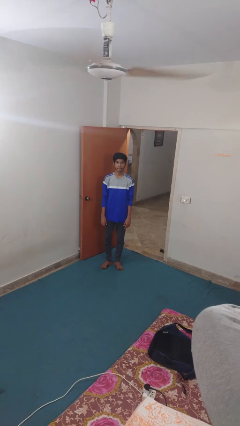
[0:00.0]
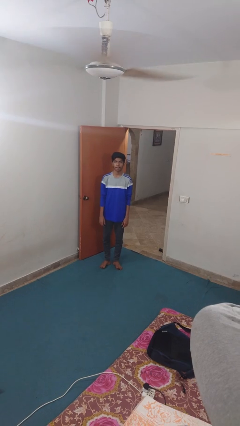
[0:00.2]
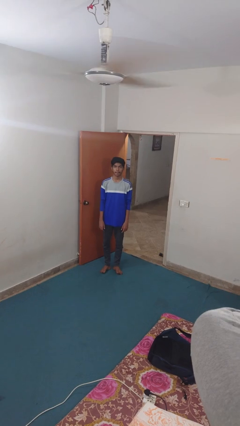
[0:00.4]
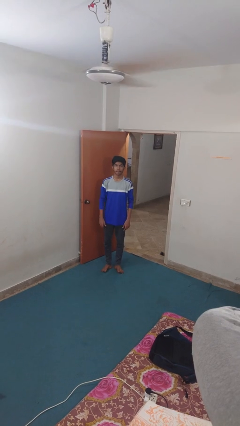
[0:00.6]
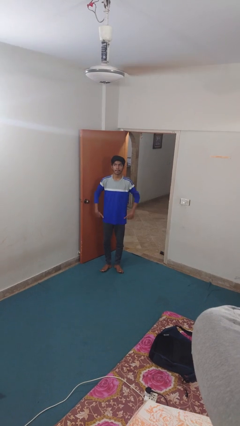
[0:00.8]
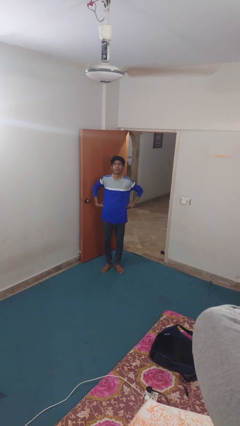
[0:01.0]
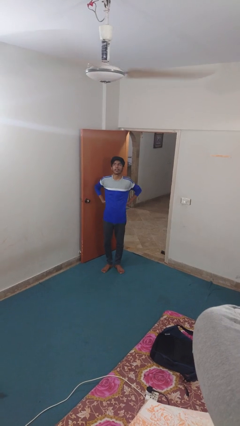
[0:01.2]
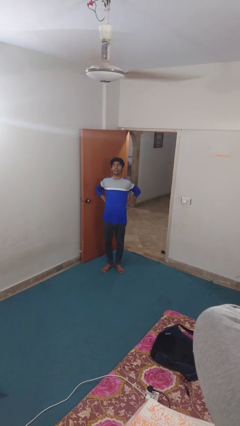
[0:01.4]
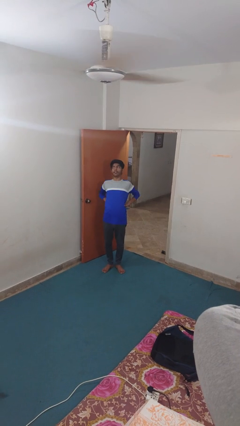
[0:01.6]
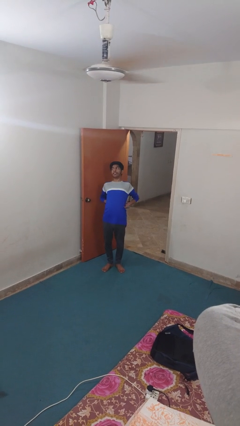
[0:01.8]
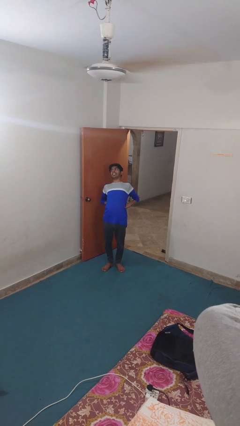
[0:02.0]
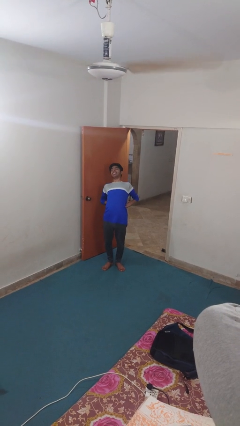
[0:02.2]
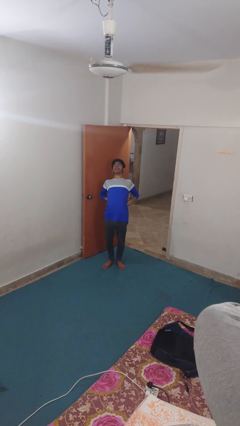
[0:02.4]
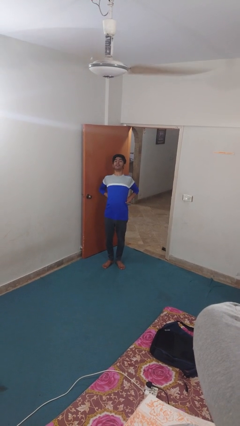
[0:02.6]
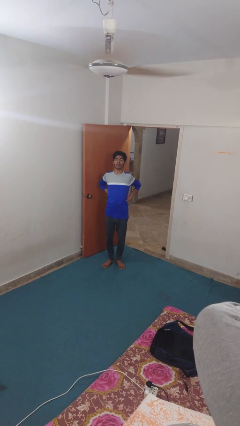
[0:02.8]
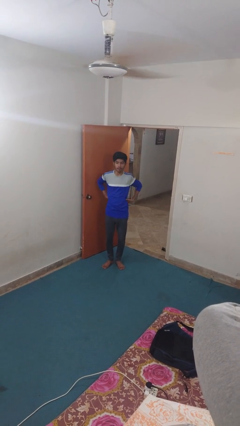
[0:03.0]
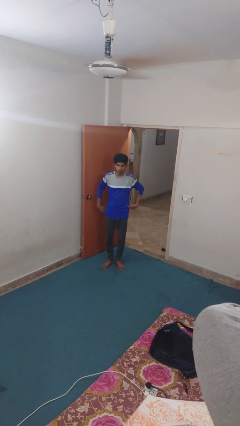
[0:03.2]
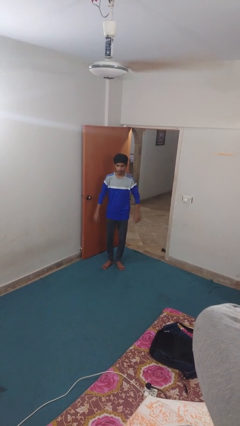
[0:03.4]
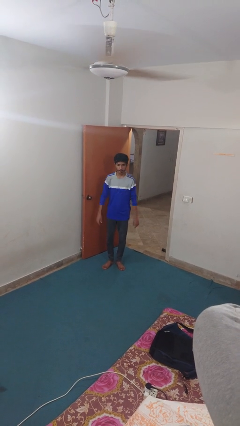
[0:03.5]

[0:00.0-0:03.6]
person stretches back

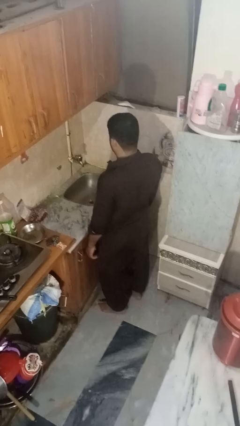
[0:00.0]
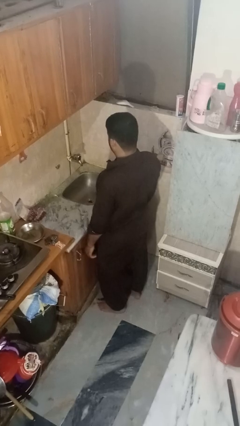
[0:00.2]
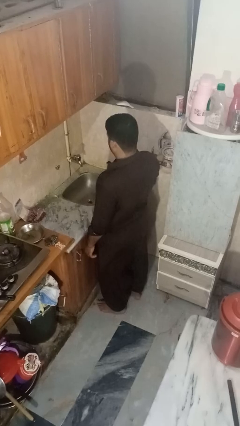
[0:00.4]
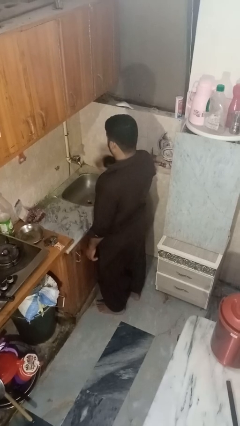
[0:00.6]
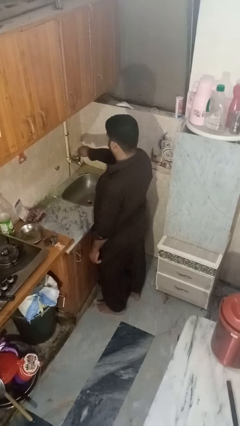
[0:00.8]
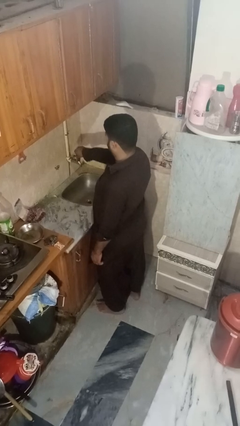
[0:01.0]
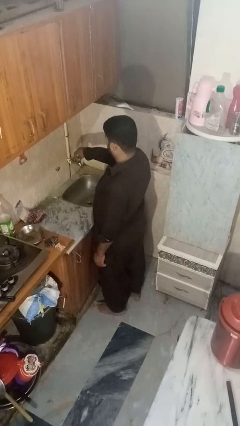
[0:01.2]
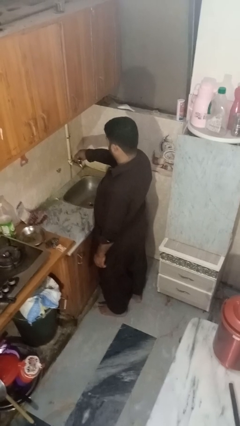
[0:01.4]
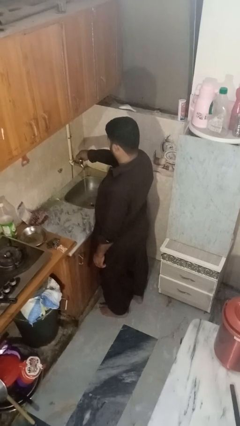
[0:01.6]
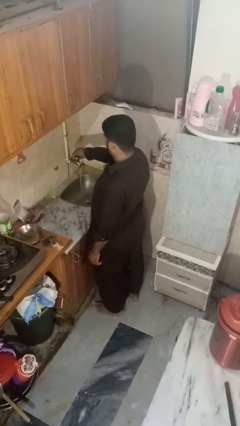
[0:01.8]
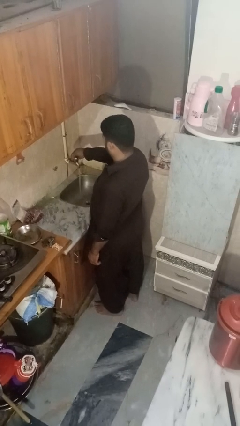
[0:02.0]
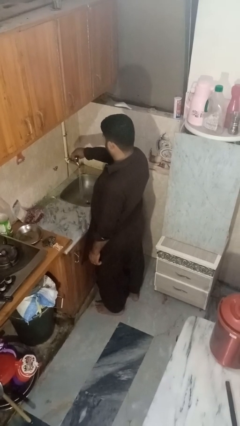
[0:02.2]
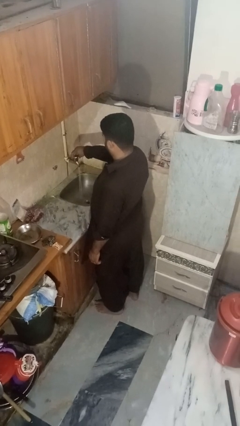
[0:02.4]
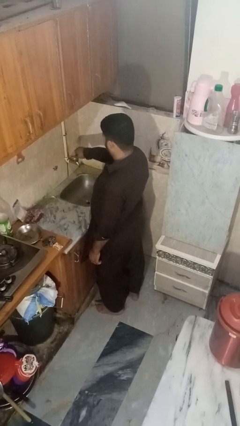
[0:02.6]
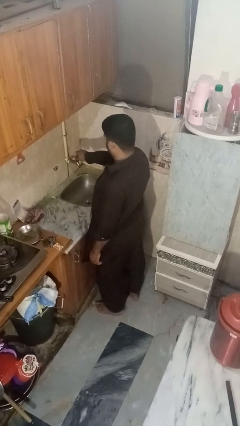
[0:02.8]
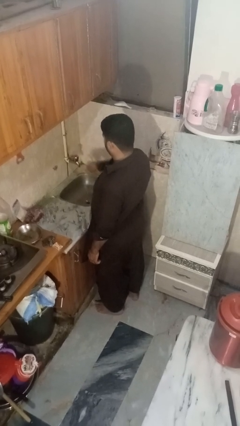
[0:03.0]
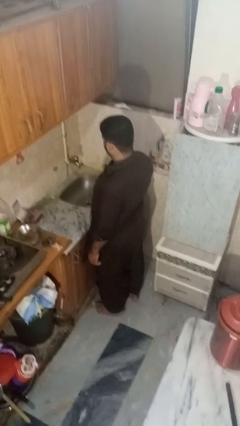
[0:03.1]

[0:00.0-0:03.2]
person turns off faucet

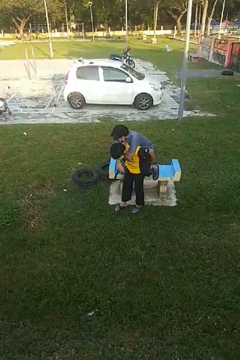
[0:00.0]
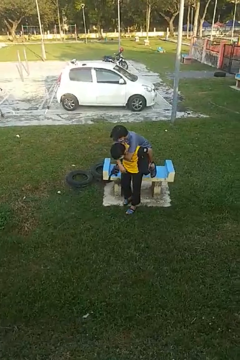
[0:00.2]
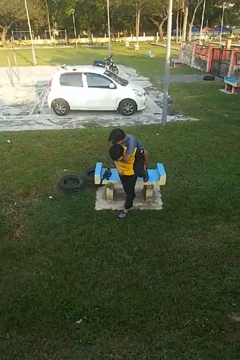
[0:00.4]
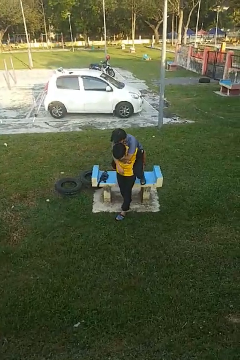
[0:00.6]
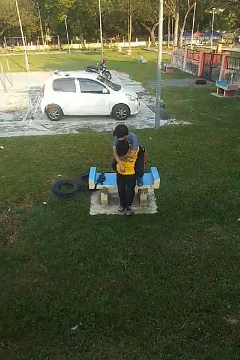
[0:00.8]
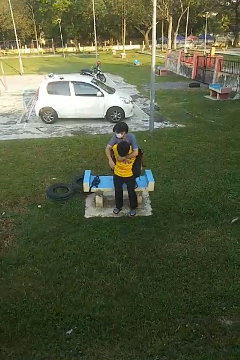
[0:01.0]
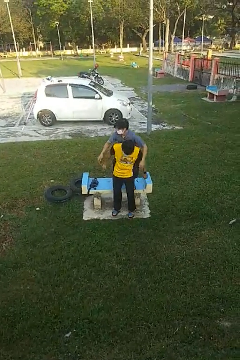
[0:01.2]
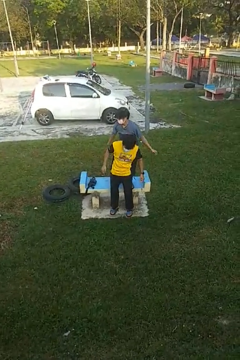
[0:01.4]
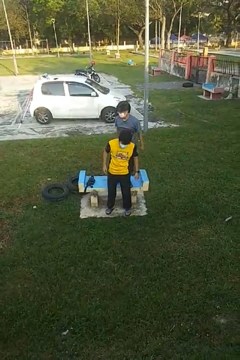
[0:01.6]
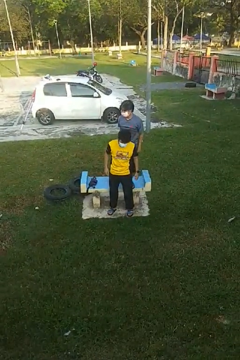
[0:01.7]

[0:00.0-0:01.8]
person puts down person

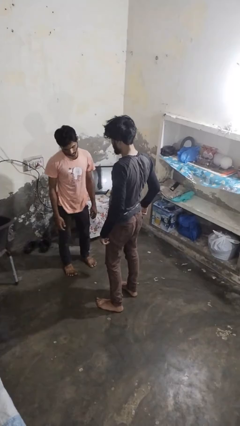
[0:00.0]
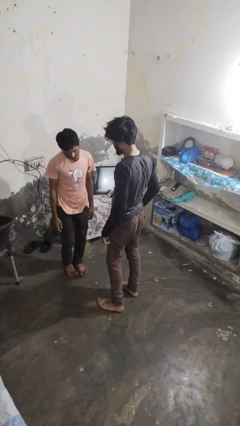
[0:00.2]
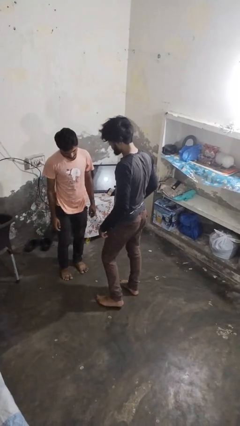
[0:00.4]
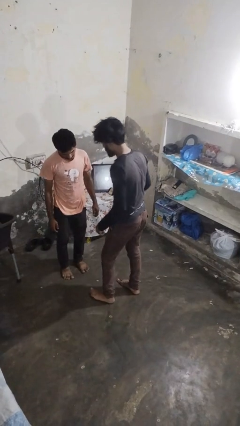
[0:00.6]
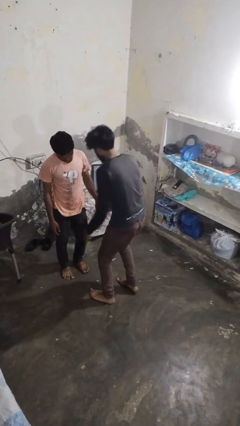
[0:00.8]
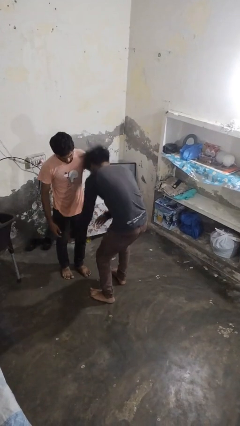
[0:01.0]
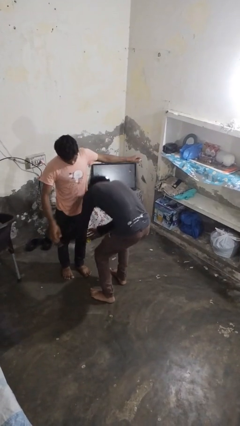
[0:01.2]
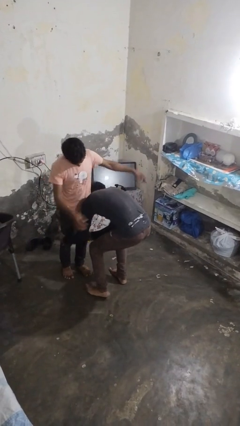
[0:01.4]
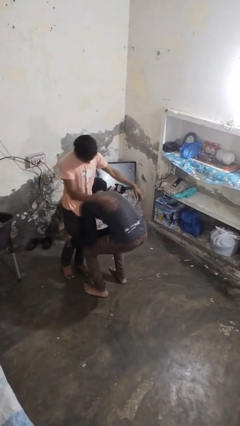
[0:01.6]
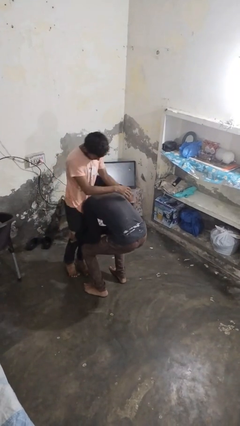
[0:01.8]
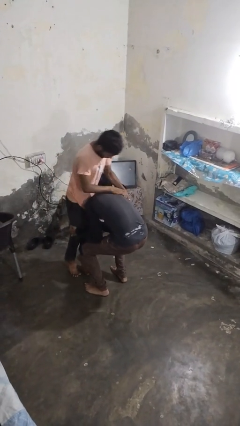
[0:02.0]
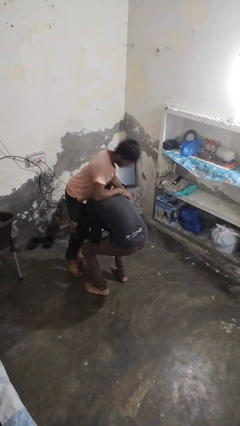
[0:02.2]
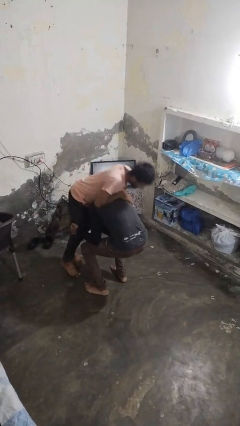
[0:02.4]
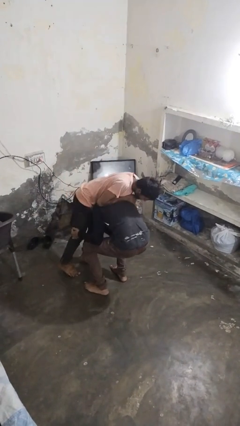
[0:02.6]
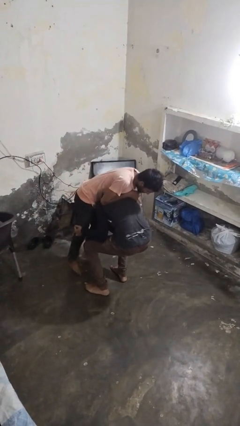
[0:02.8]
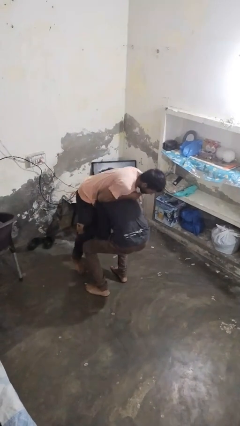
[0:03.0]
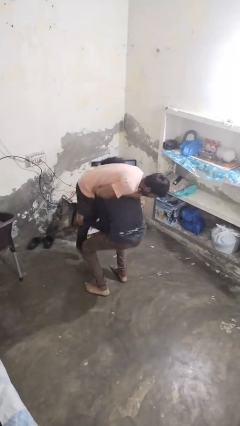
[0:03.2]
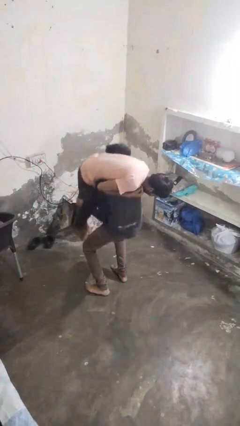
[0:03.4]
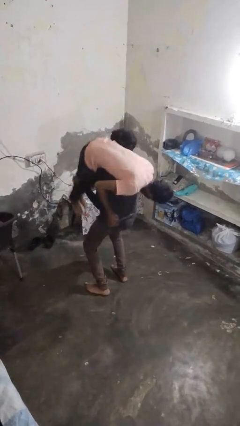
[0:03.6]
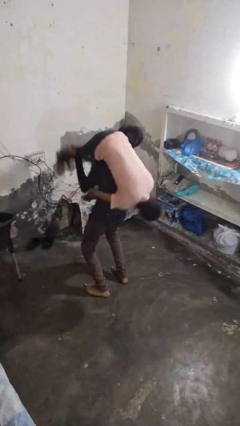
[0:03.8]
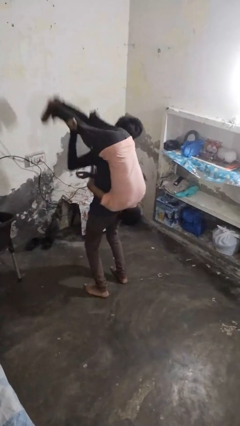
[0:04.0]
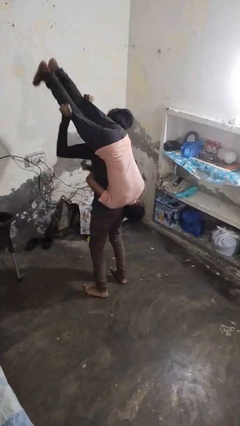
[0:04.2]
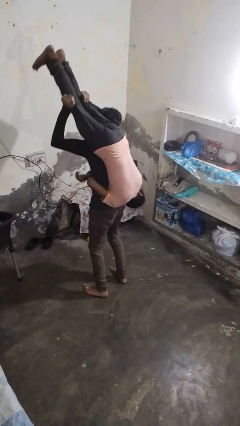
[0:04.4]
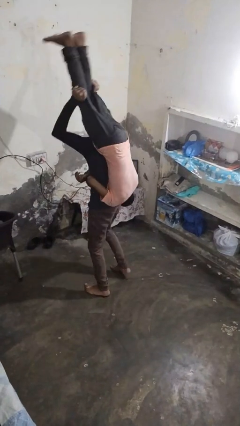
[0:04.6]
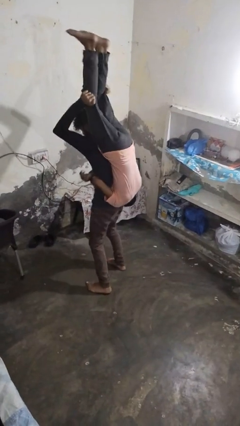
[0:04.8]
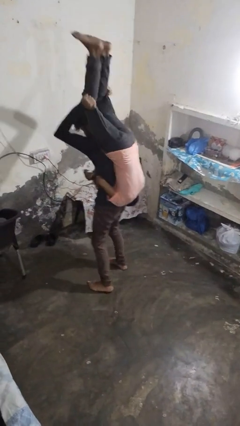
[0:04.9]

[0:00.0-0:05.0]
person carries person over shoulder

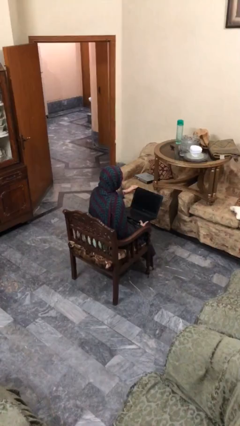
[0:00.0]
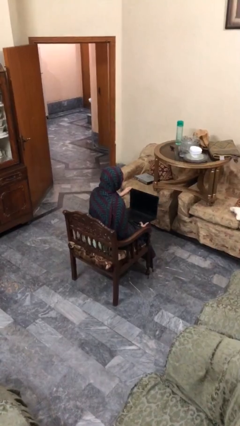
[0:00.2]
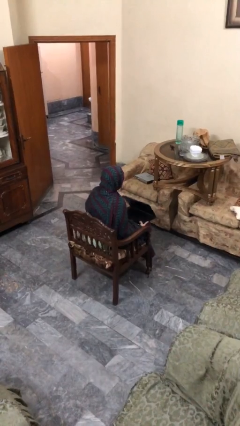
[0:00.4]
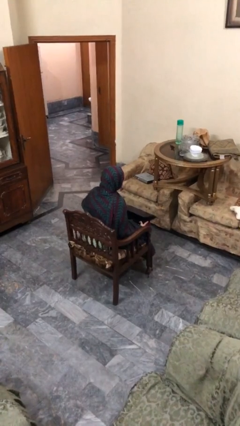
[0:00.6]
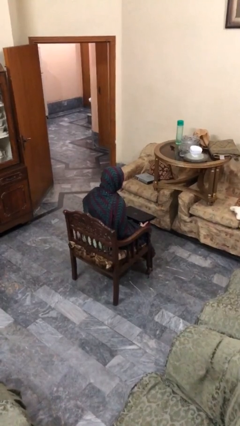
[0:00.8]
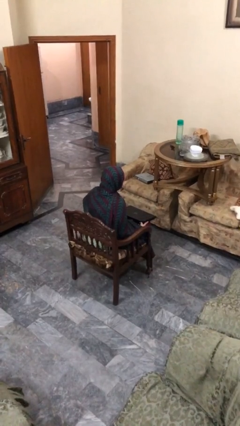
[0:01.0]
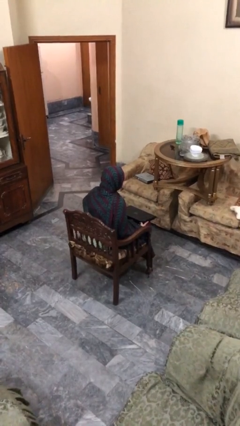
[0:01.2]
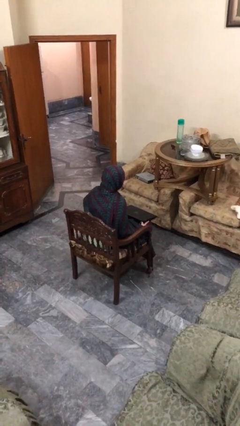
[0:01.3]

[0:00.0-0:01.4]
person closes laptop

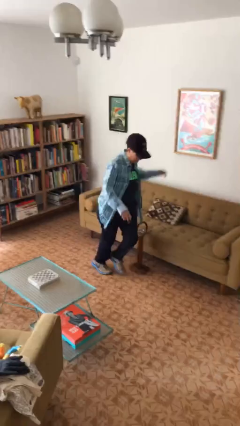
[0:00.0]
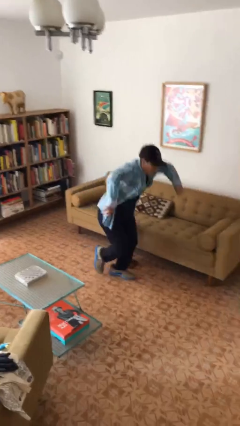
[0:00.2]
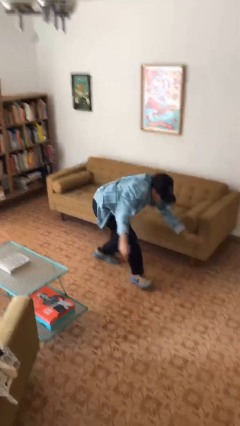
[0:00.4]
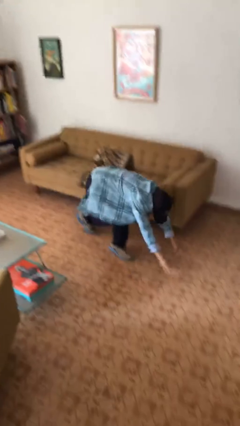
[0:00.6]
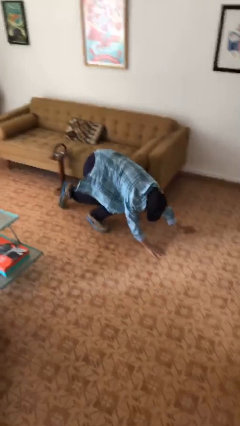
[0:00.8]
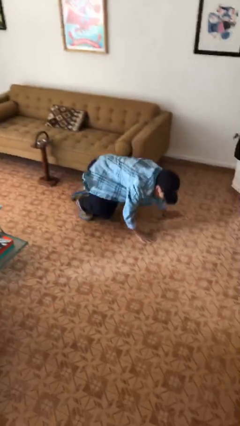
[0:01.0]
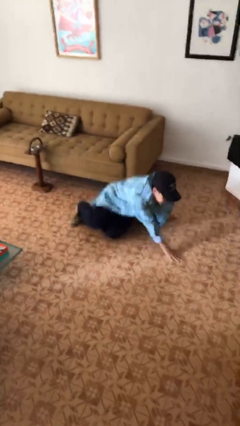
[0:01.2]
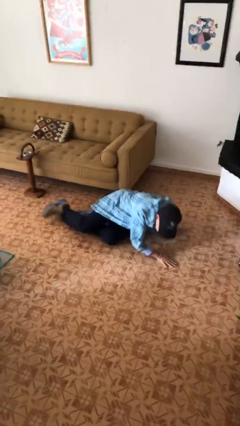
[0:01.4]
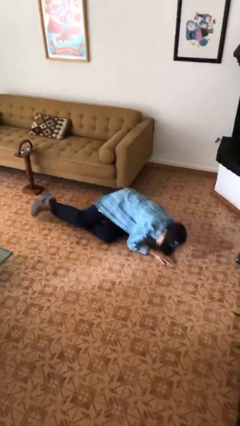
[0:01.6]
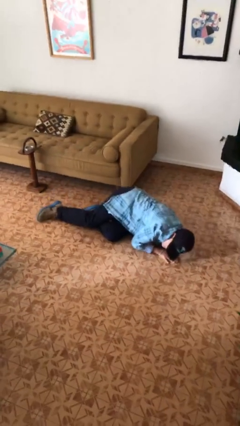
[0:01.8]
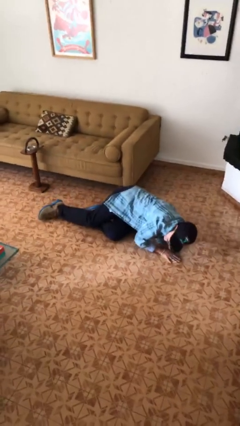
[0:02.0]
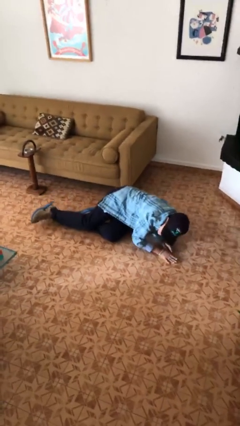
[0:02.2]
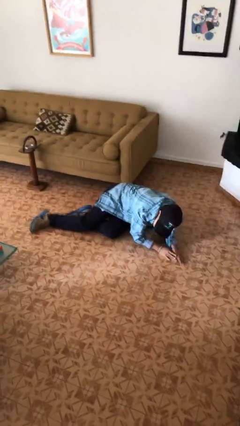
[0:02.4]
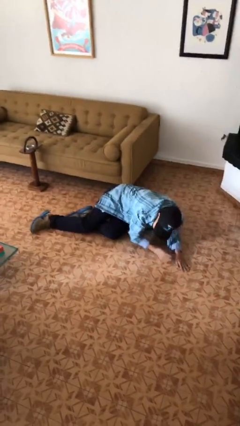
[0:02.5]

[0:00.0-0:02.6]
person trips on object on floor
